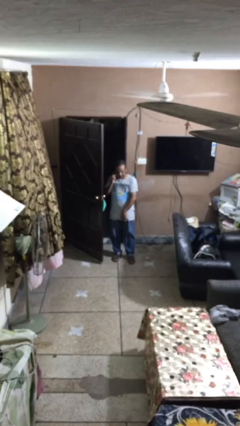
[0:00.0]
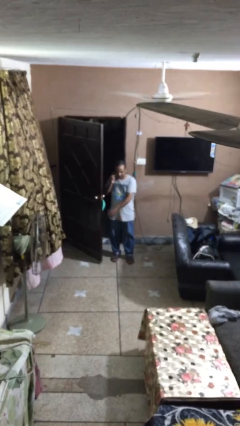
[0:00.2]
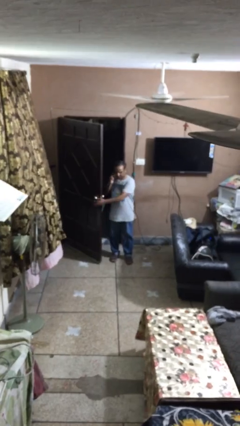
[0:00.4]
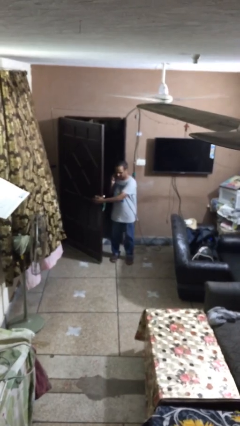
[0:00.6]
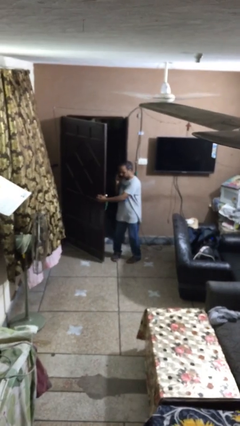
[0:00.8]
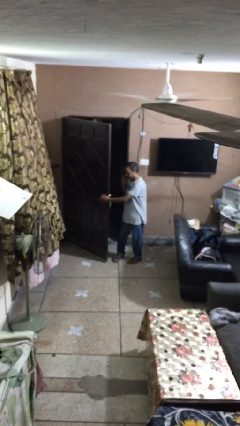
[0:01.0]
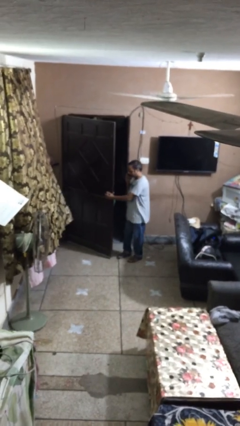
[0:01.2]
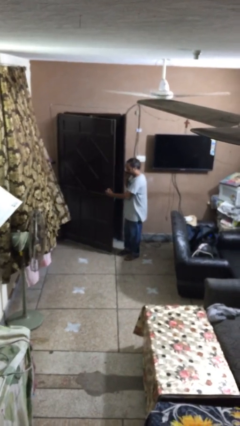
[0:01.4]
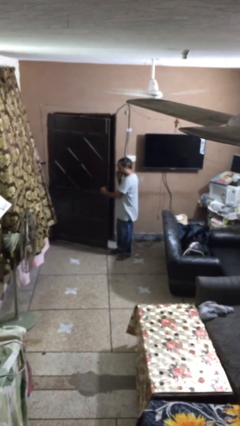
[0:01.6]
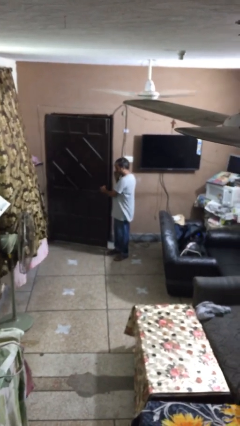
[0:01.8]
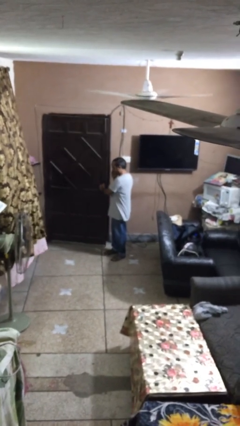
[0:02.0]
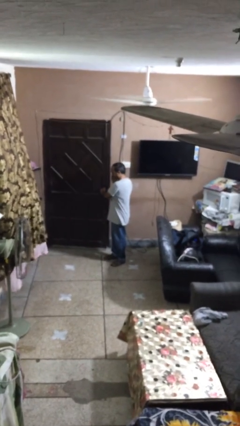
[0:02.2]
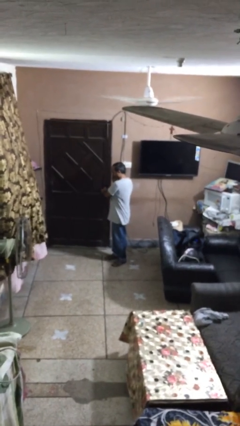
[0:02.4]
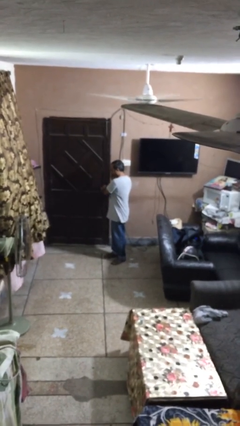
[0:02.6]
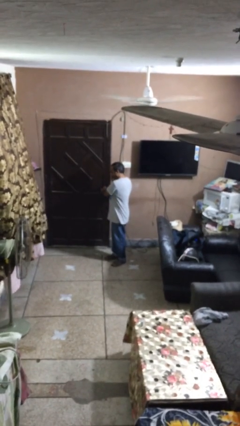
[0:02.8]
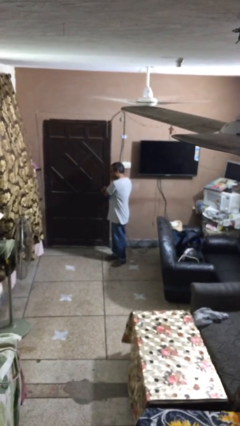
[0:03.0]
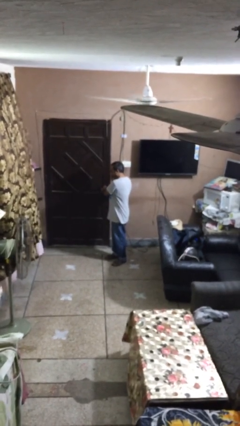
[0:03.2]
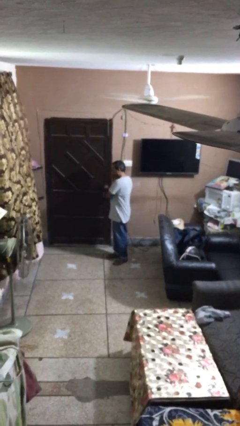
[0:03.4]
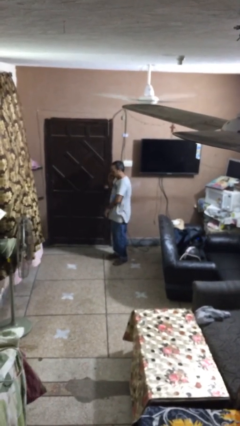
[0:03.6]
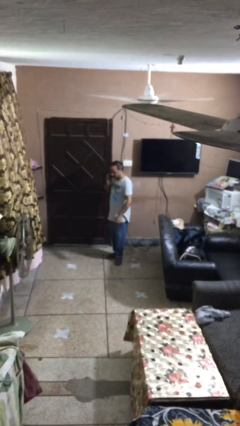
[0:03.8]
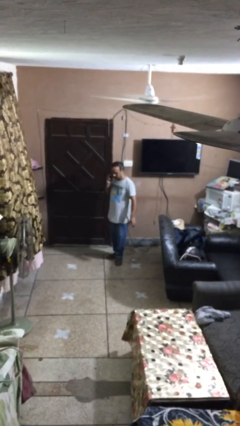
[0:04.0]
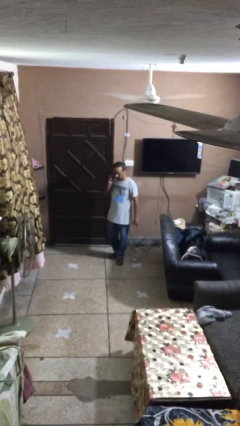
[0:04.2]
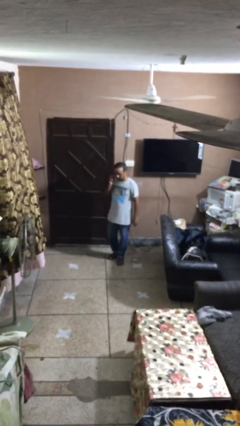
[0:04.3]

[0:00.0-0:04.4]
person closes facility door

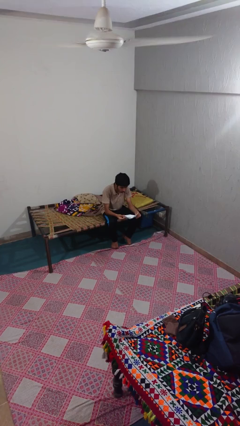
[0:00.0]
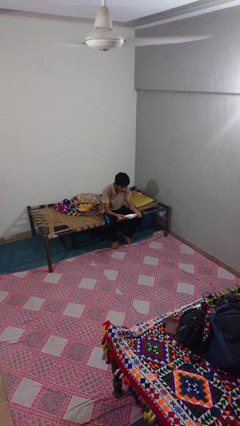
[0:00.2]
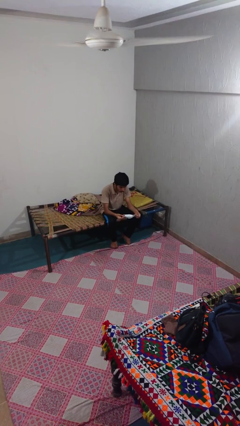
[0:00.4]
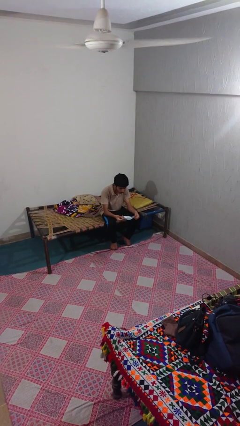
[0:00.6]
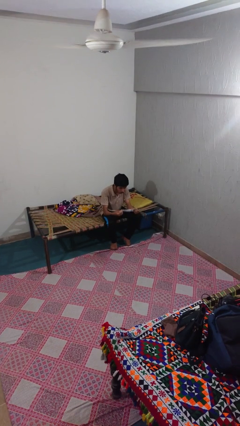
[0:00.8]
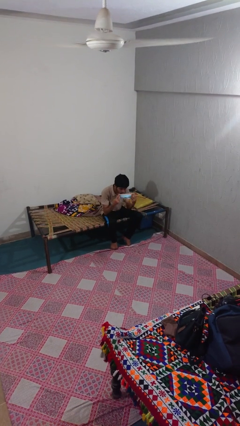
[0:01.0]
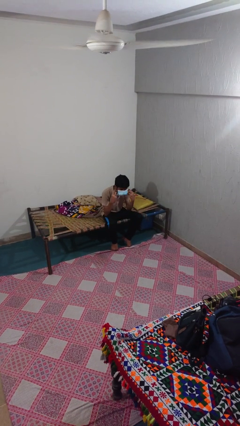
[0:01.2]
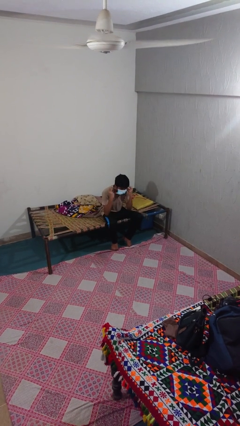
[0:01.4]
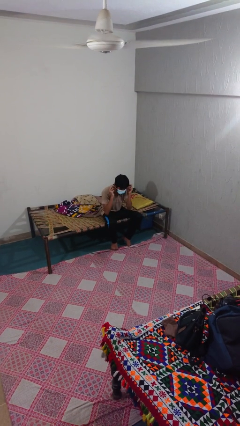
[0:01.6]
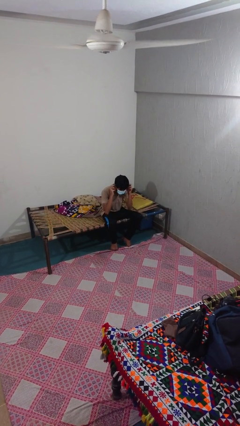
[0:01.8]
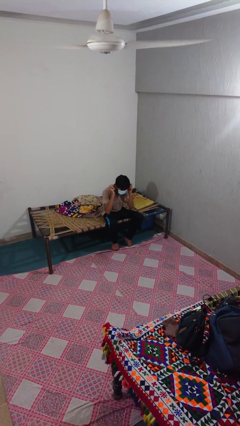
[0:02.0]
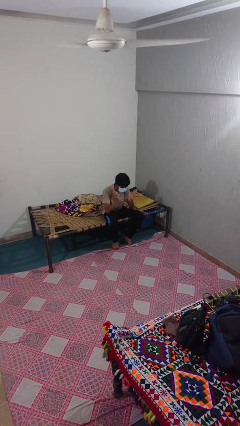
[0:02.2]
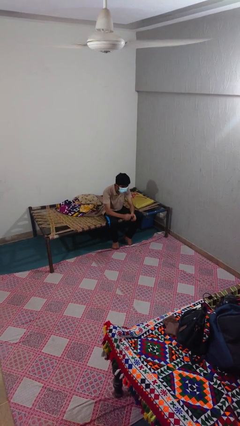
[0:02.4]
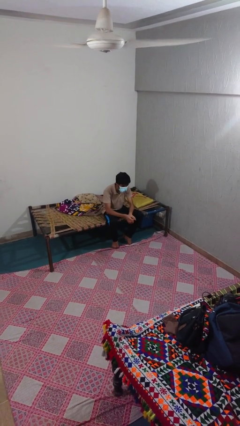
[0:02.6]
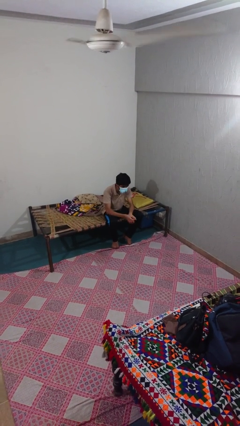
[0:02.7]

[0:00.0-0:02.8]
person puts on facemask

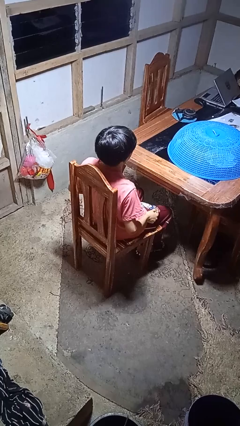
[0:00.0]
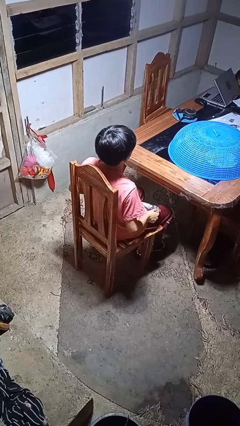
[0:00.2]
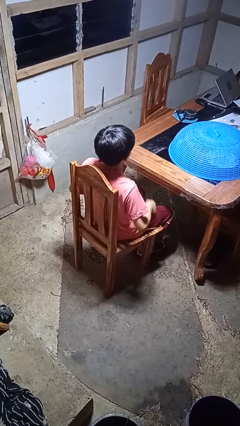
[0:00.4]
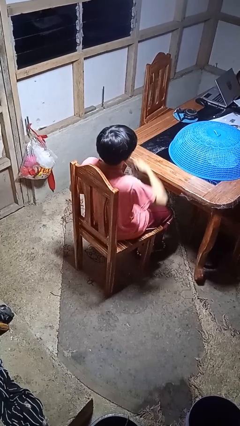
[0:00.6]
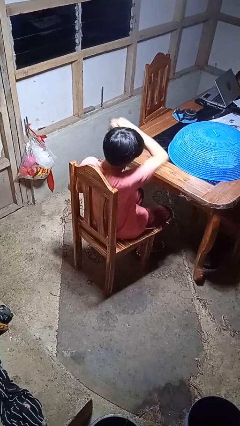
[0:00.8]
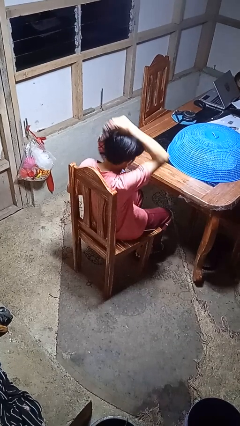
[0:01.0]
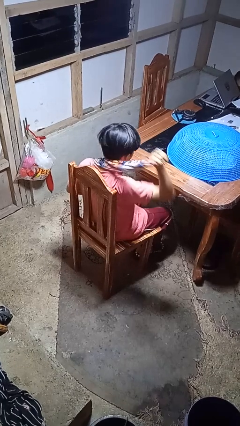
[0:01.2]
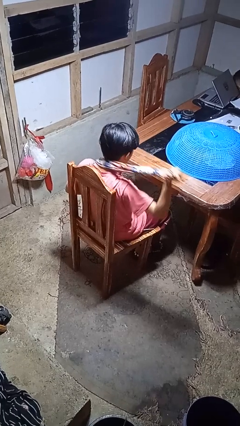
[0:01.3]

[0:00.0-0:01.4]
person puts on scarf

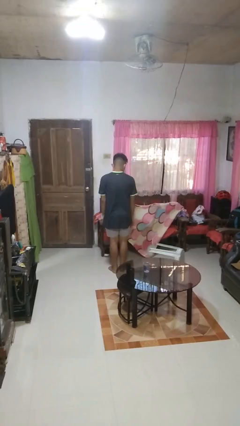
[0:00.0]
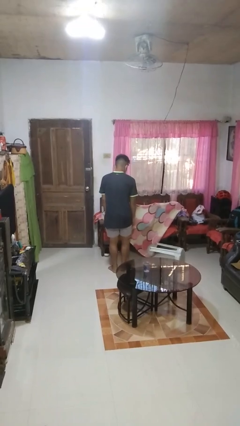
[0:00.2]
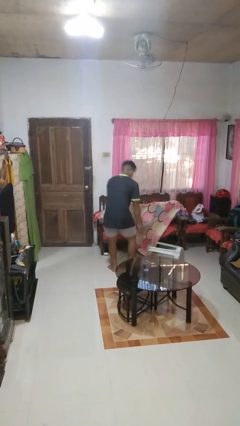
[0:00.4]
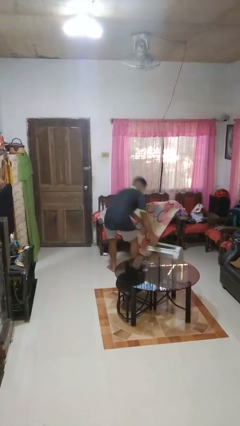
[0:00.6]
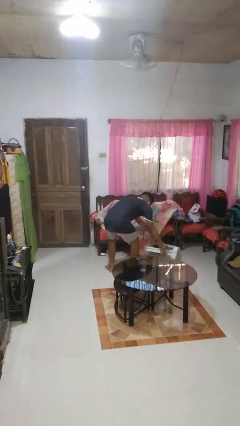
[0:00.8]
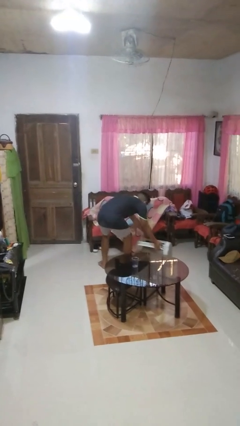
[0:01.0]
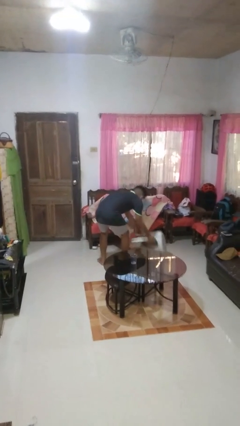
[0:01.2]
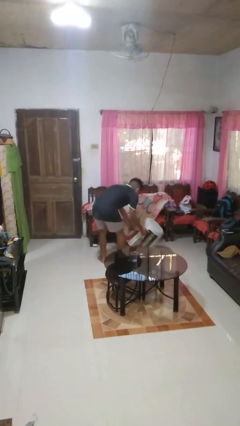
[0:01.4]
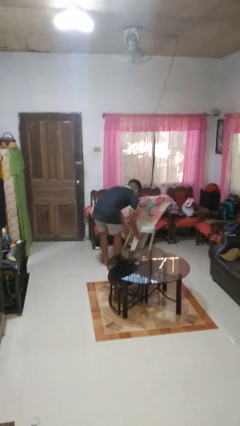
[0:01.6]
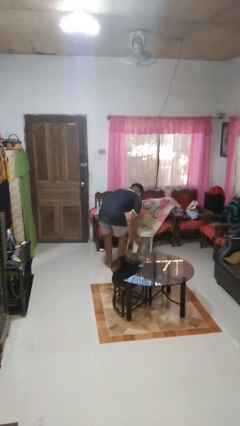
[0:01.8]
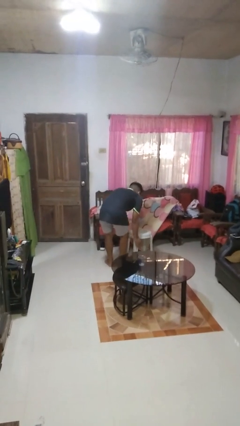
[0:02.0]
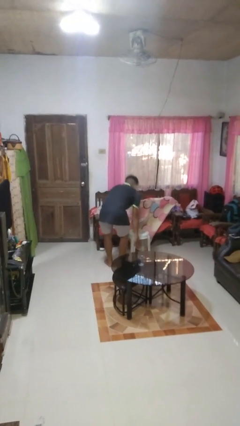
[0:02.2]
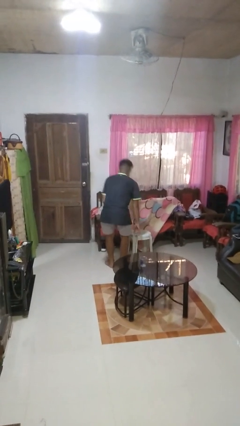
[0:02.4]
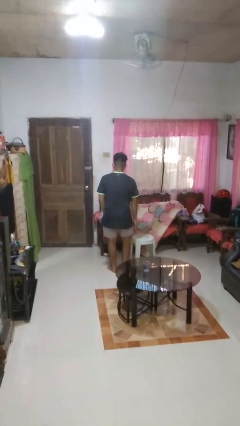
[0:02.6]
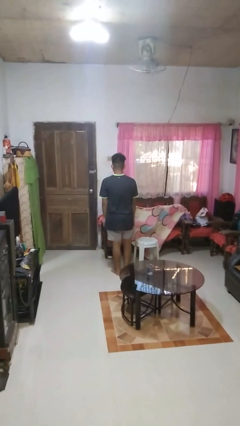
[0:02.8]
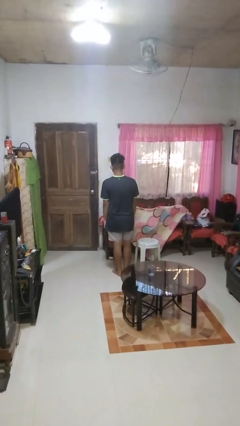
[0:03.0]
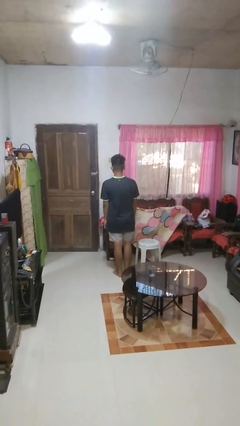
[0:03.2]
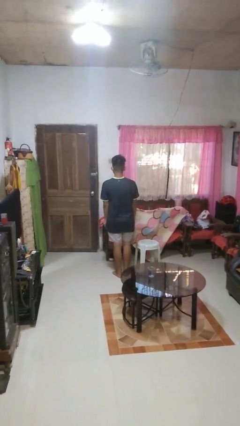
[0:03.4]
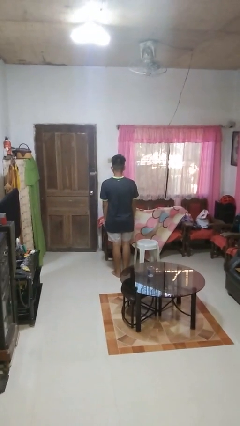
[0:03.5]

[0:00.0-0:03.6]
person sets upright furniture

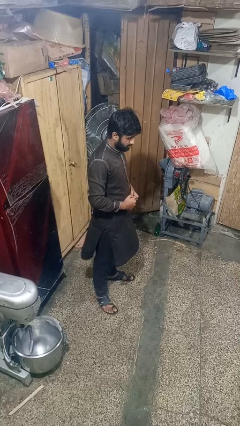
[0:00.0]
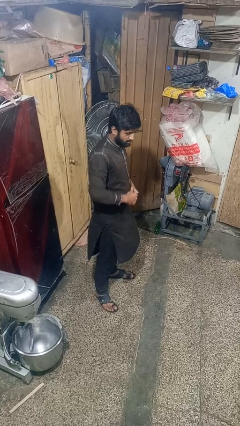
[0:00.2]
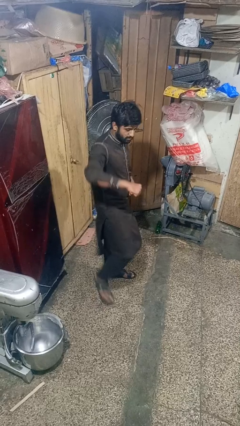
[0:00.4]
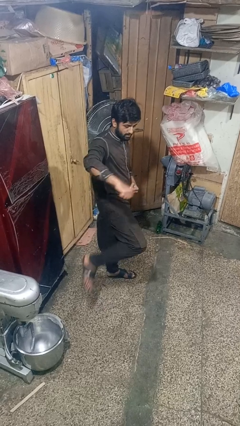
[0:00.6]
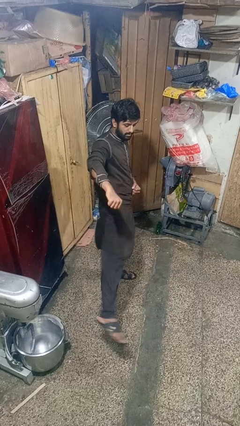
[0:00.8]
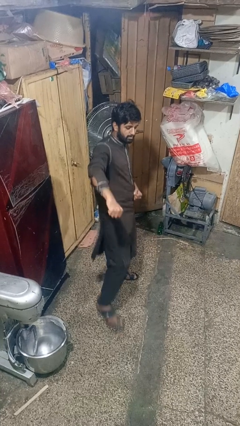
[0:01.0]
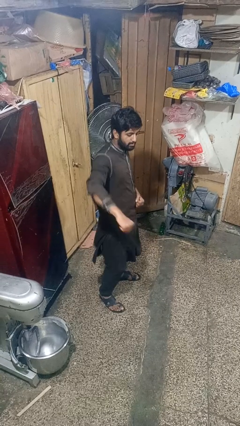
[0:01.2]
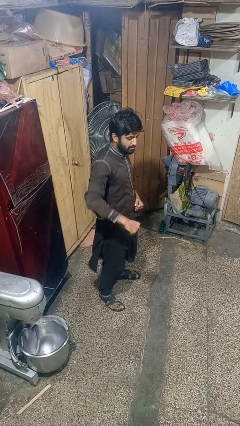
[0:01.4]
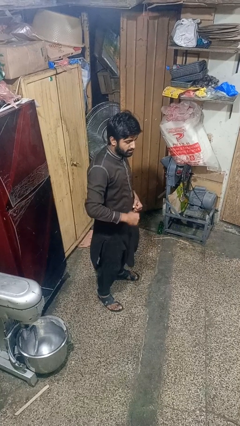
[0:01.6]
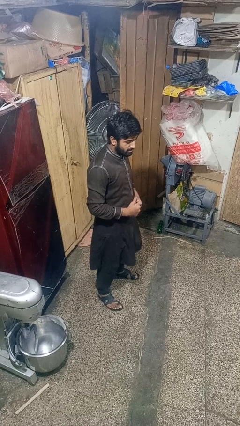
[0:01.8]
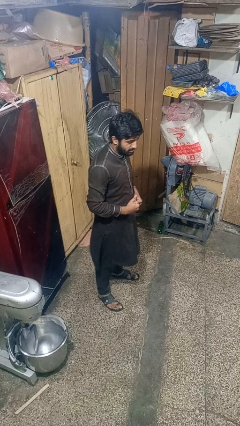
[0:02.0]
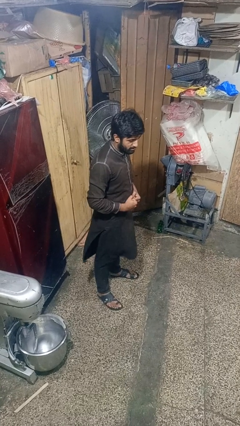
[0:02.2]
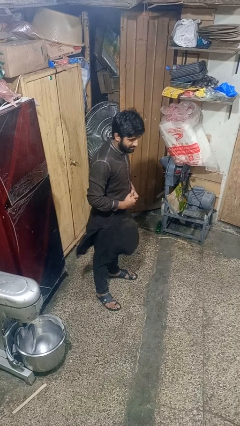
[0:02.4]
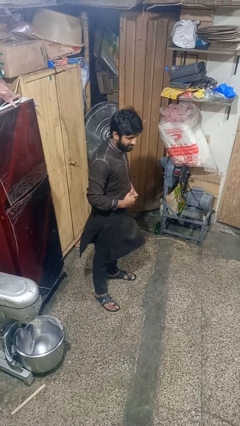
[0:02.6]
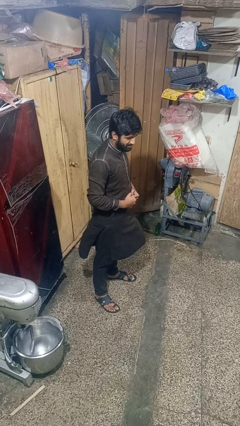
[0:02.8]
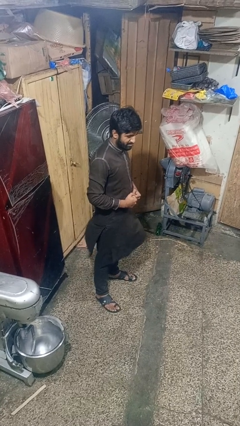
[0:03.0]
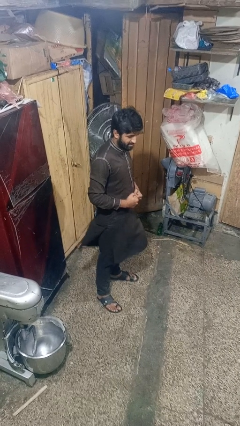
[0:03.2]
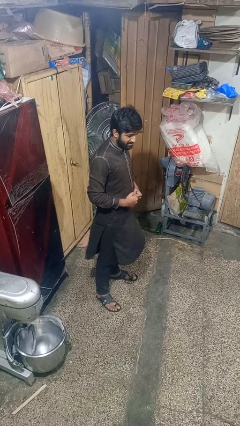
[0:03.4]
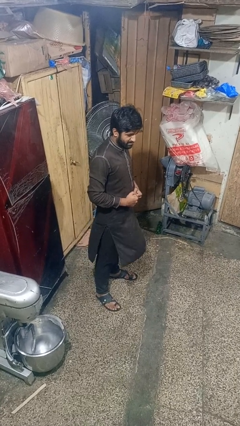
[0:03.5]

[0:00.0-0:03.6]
person karate kicks

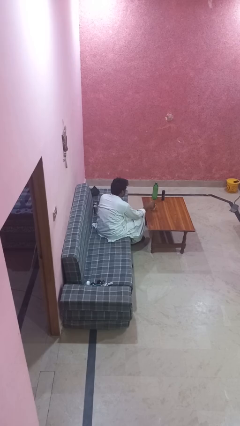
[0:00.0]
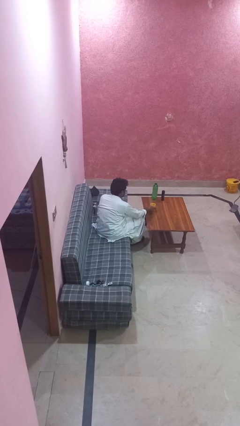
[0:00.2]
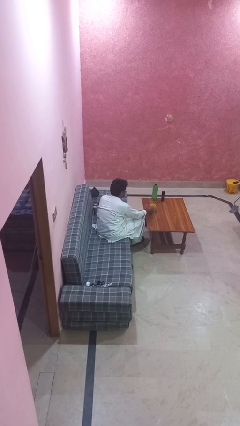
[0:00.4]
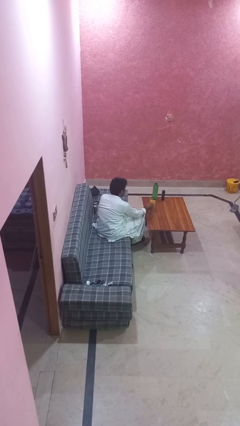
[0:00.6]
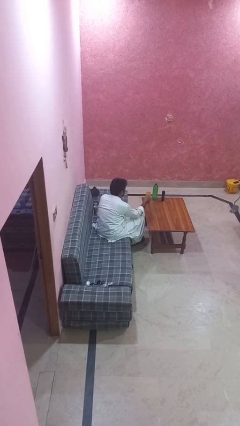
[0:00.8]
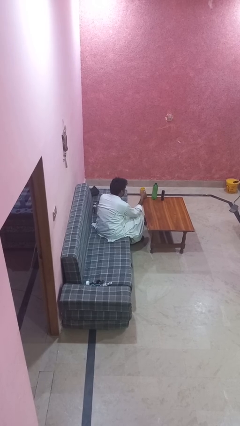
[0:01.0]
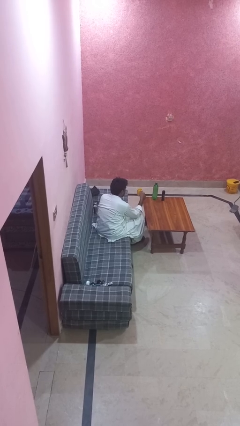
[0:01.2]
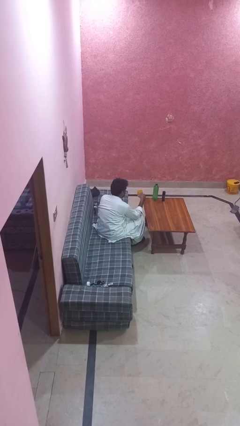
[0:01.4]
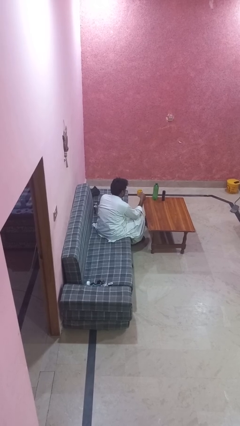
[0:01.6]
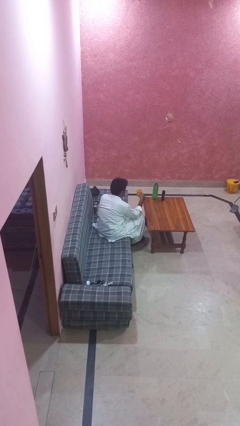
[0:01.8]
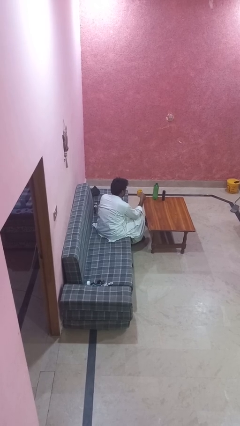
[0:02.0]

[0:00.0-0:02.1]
person picks up object from table
